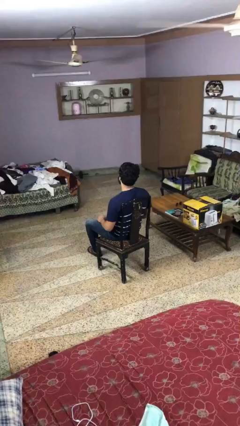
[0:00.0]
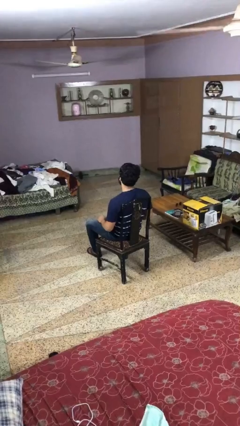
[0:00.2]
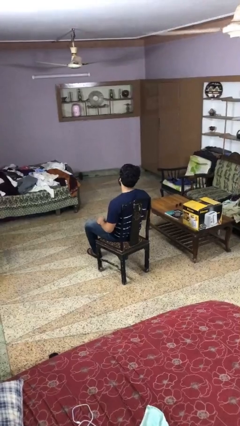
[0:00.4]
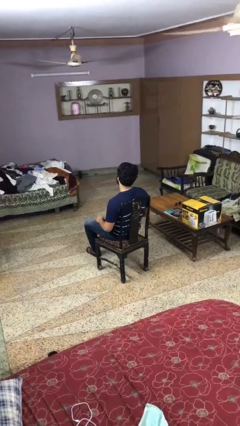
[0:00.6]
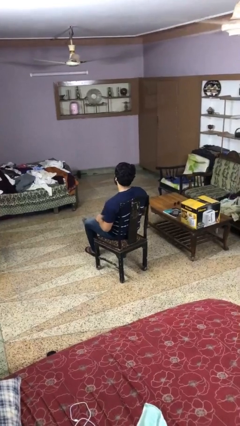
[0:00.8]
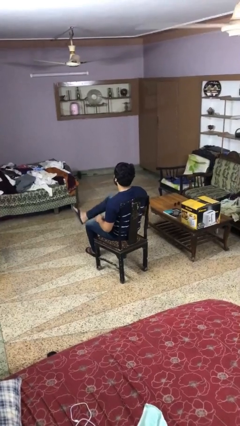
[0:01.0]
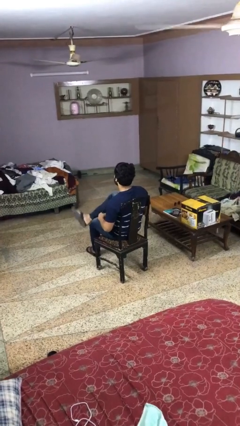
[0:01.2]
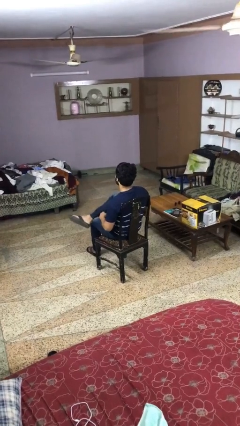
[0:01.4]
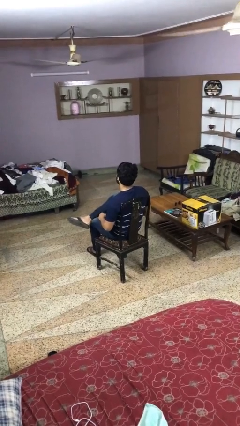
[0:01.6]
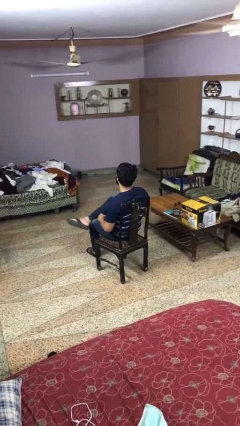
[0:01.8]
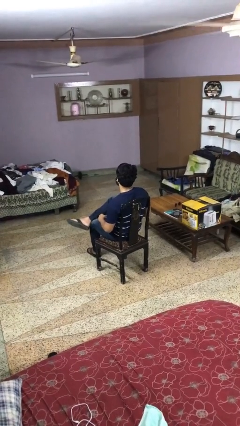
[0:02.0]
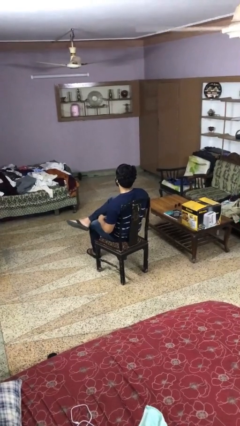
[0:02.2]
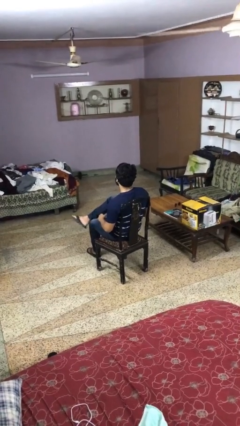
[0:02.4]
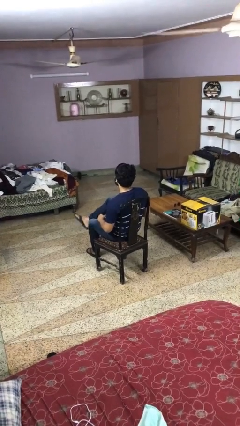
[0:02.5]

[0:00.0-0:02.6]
person crosses legs

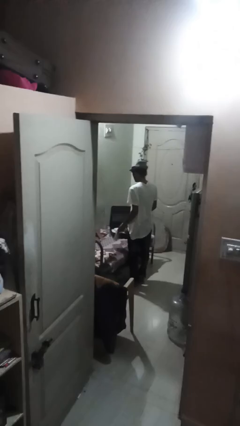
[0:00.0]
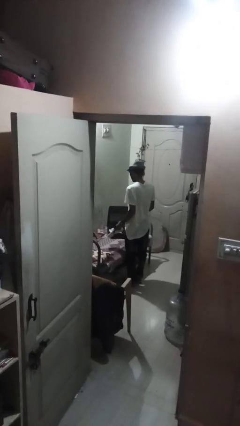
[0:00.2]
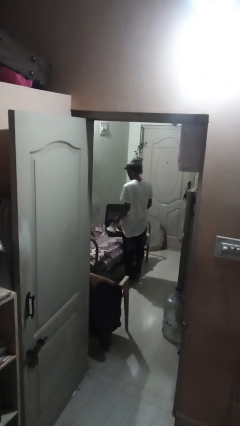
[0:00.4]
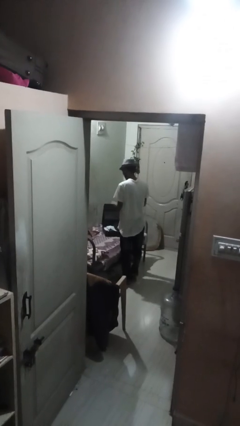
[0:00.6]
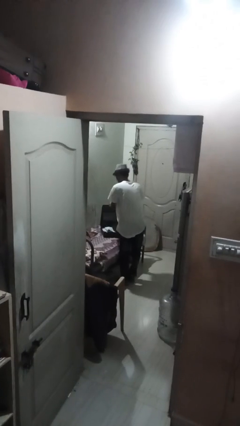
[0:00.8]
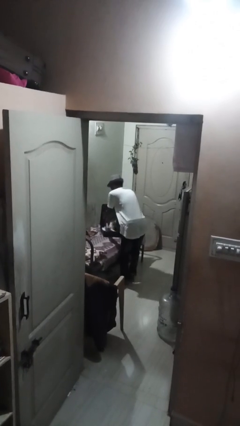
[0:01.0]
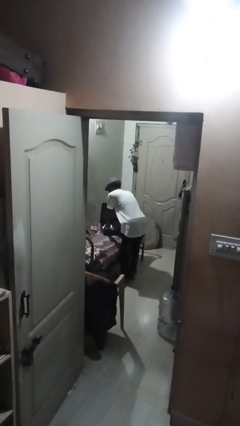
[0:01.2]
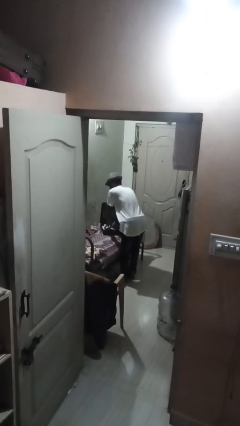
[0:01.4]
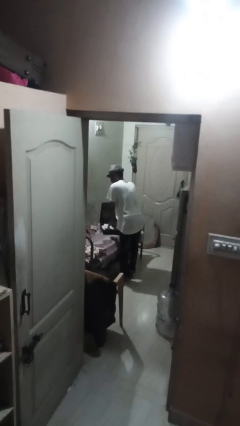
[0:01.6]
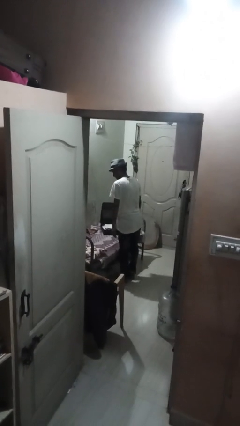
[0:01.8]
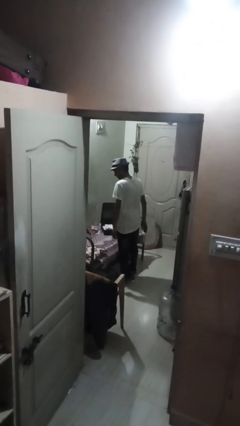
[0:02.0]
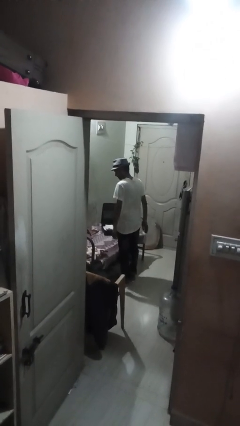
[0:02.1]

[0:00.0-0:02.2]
person loads clothes into suitcase

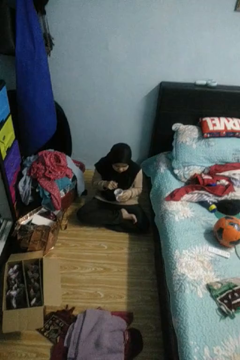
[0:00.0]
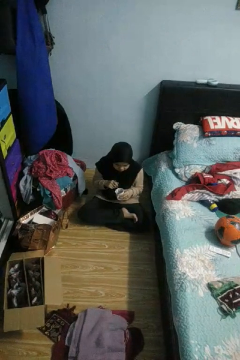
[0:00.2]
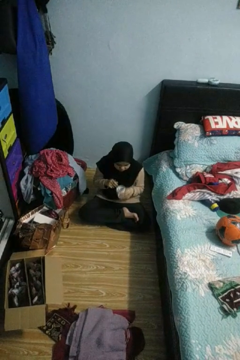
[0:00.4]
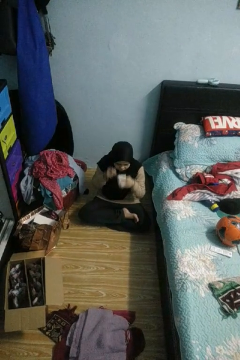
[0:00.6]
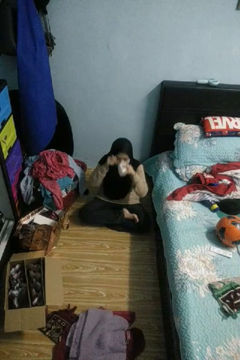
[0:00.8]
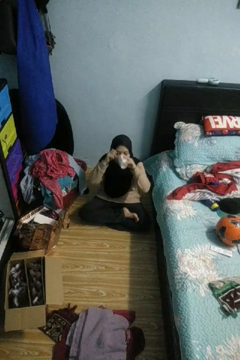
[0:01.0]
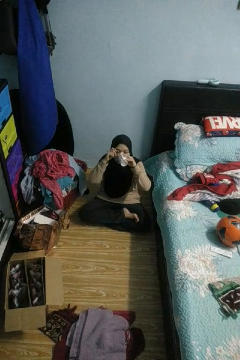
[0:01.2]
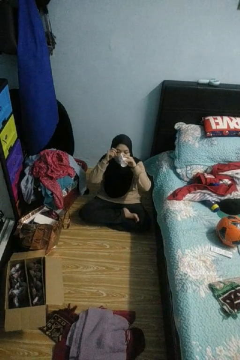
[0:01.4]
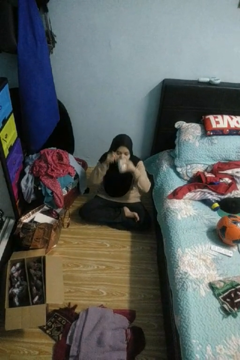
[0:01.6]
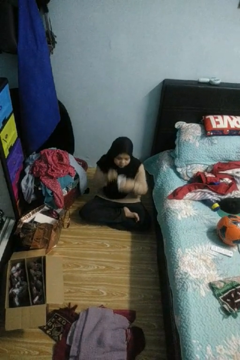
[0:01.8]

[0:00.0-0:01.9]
person drinks from mug

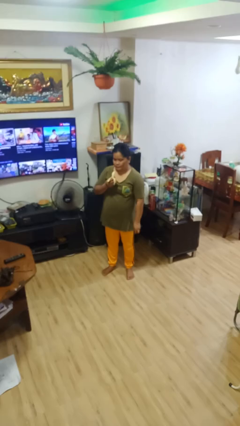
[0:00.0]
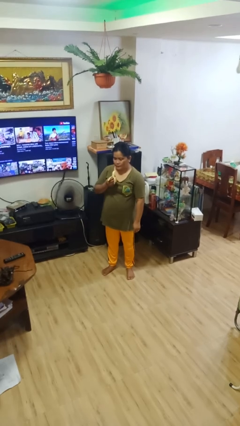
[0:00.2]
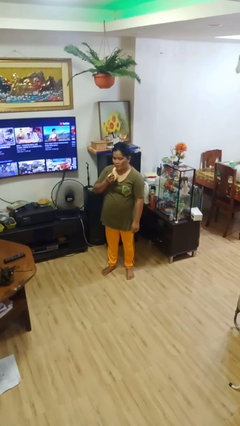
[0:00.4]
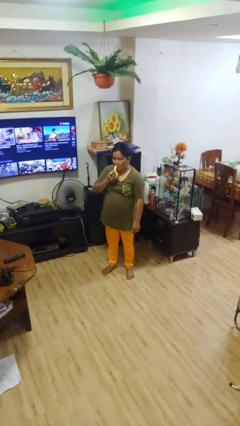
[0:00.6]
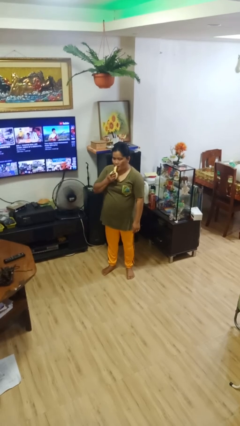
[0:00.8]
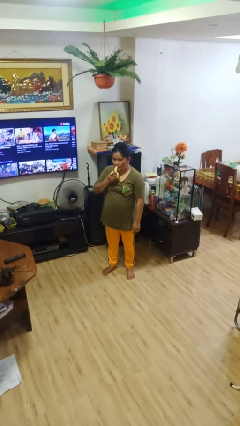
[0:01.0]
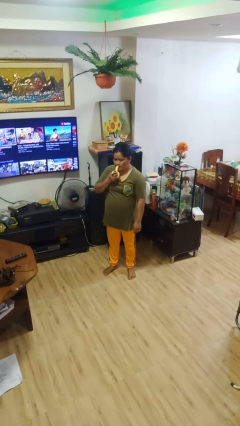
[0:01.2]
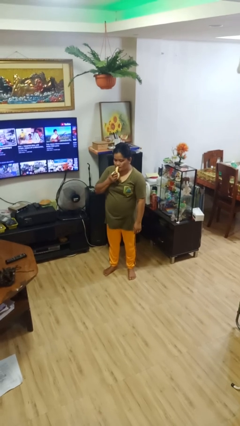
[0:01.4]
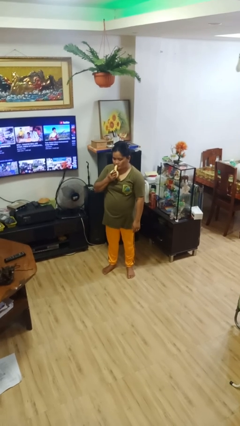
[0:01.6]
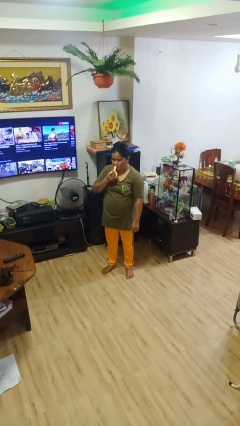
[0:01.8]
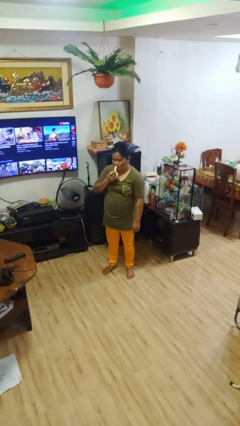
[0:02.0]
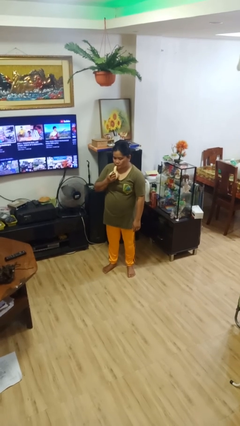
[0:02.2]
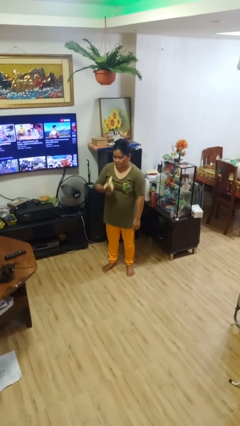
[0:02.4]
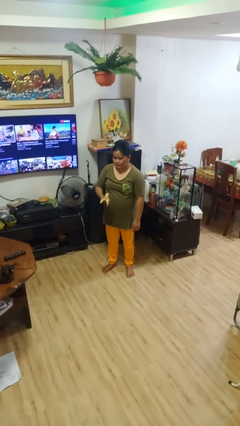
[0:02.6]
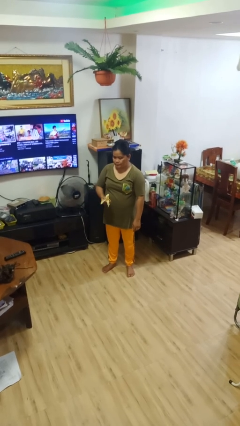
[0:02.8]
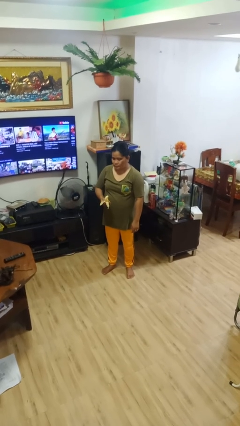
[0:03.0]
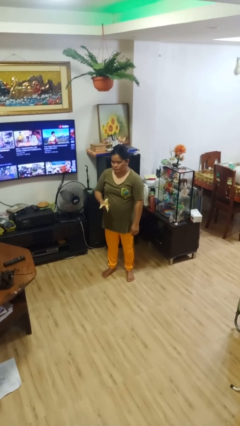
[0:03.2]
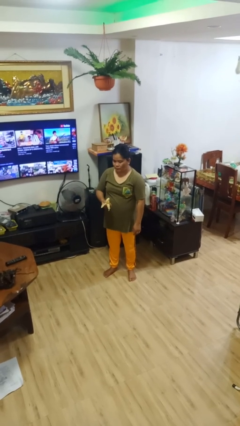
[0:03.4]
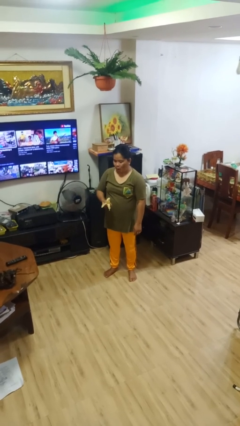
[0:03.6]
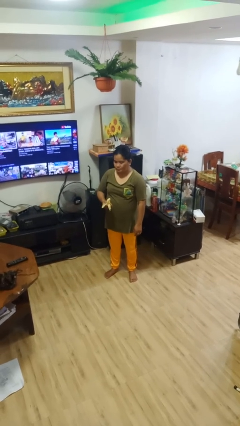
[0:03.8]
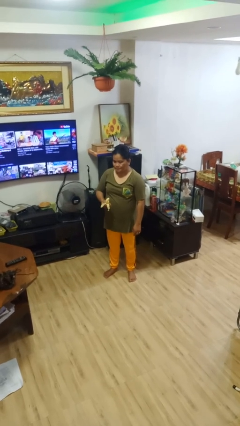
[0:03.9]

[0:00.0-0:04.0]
person eats banana

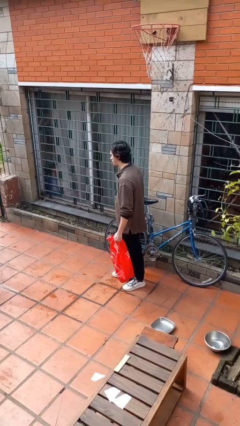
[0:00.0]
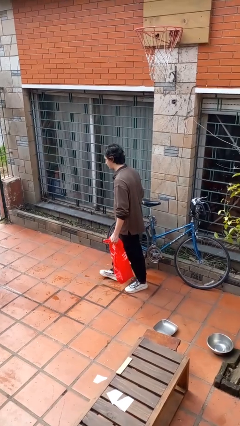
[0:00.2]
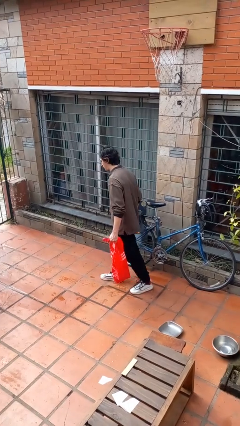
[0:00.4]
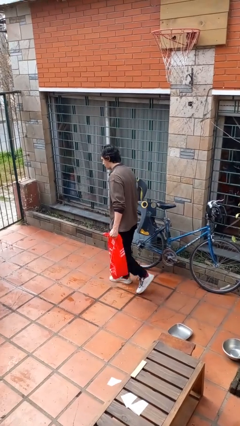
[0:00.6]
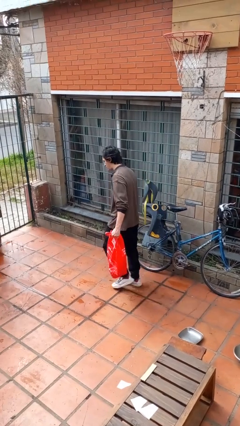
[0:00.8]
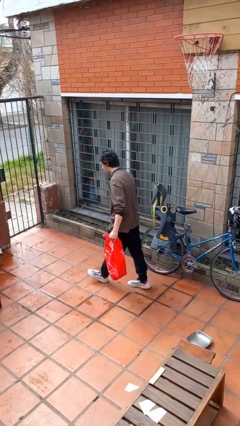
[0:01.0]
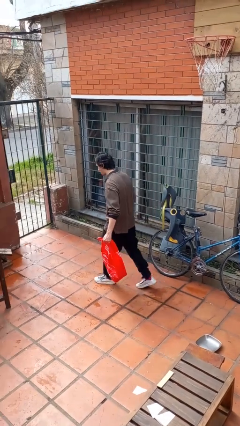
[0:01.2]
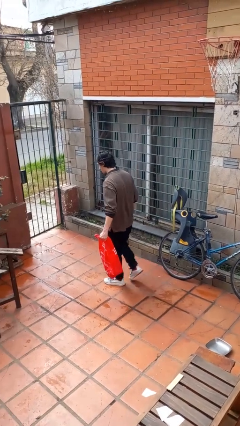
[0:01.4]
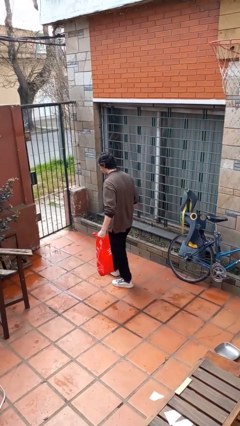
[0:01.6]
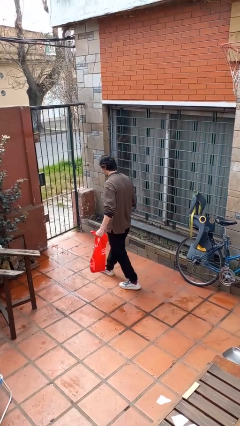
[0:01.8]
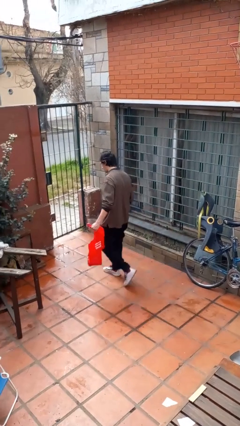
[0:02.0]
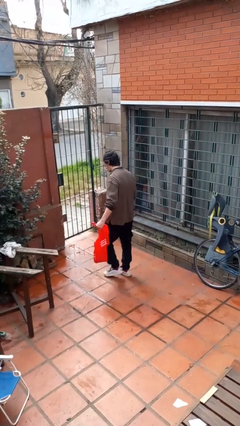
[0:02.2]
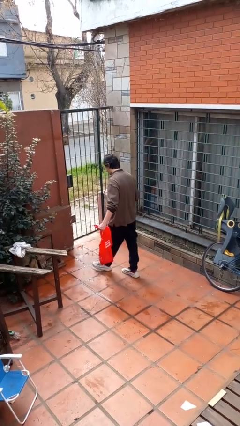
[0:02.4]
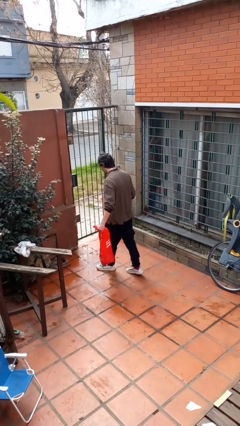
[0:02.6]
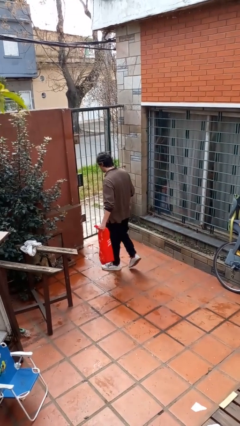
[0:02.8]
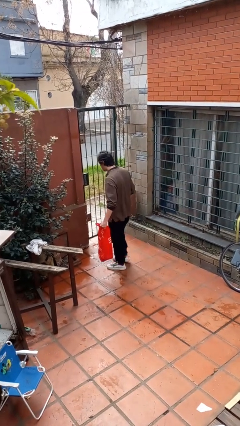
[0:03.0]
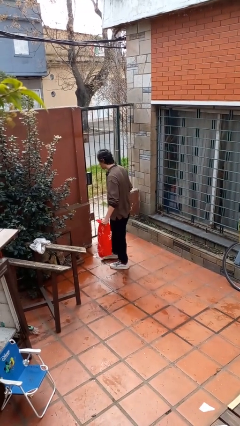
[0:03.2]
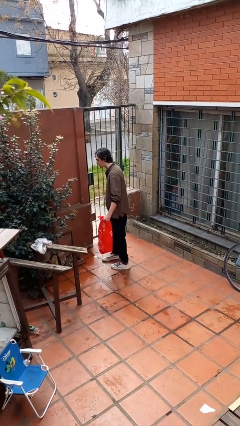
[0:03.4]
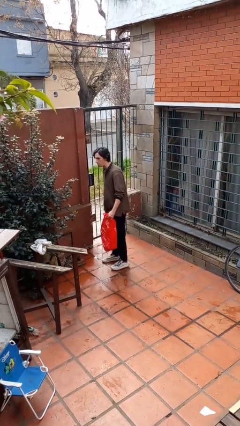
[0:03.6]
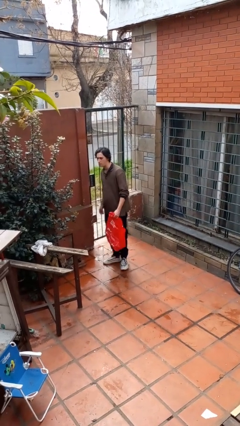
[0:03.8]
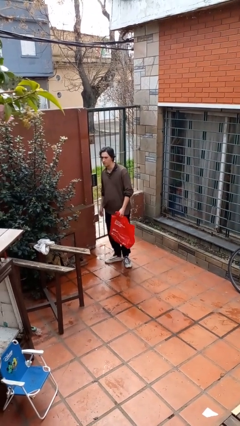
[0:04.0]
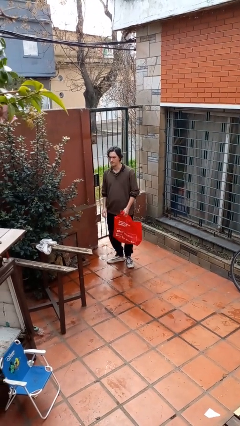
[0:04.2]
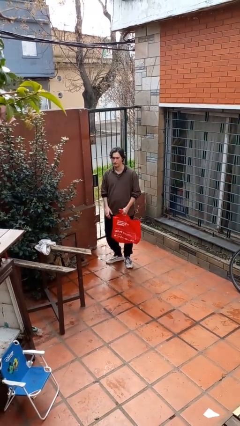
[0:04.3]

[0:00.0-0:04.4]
person carries groceries

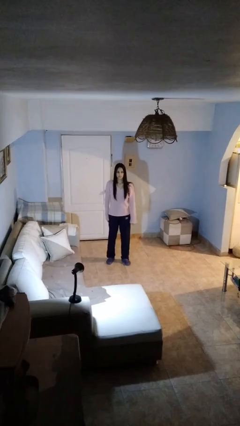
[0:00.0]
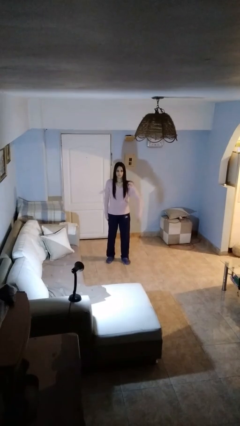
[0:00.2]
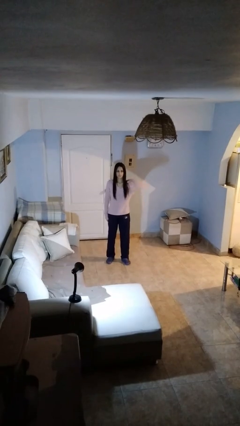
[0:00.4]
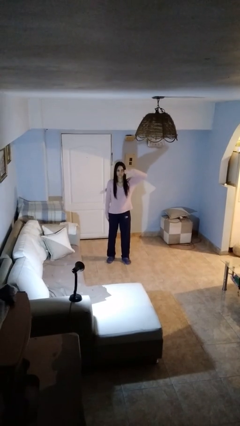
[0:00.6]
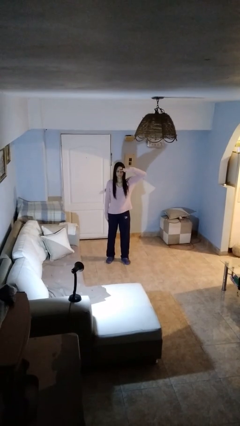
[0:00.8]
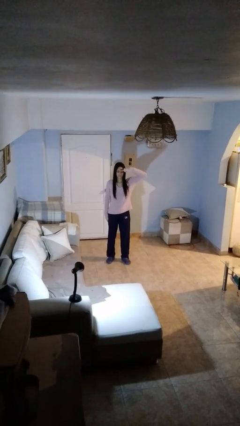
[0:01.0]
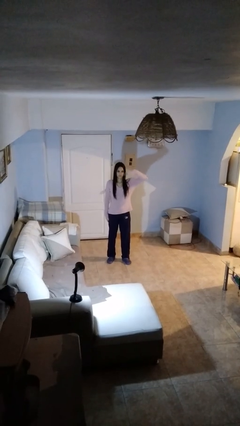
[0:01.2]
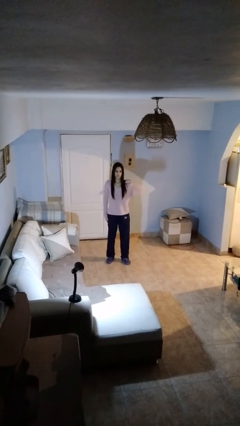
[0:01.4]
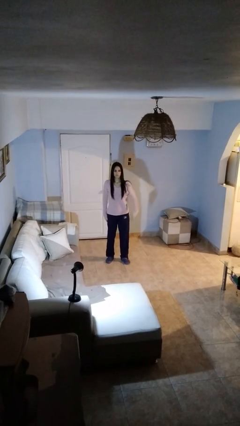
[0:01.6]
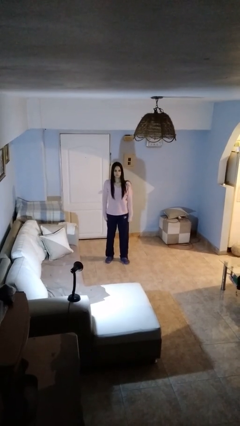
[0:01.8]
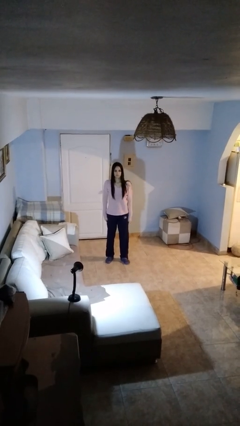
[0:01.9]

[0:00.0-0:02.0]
person salutes

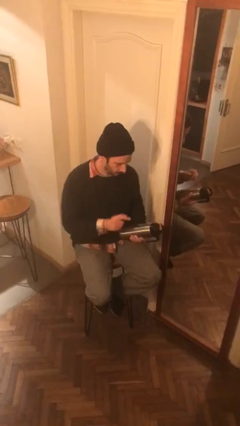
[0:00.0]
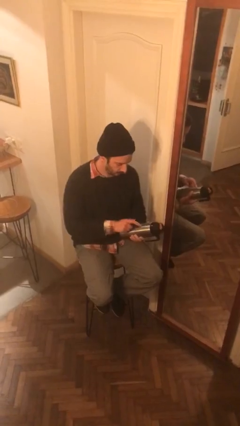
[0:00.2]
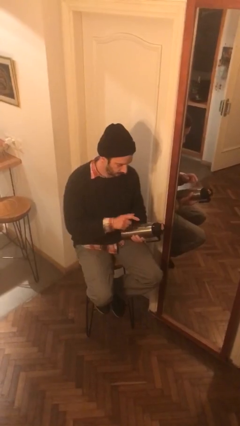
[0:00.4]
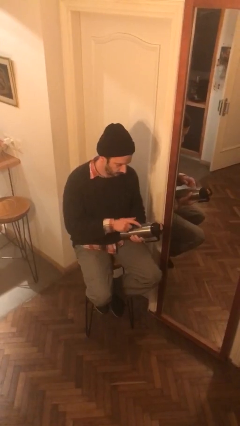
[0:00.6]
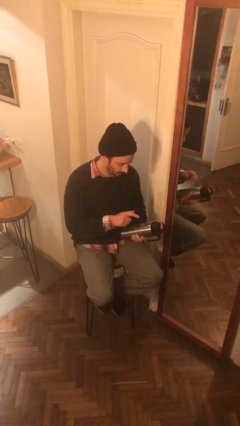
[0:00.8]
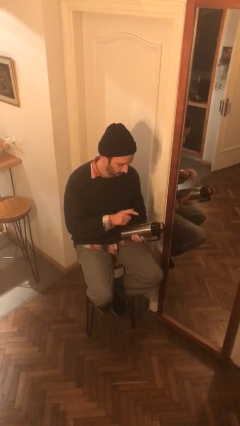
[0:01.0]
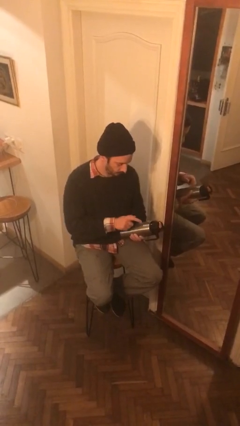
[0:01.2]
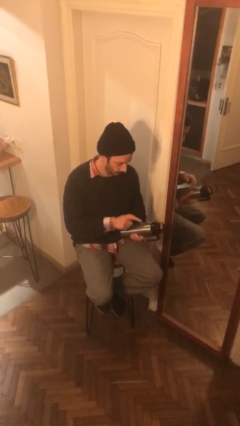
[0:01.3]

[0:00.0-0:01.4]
person taps object with finger
